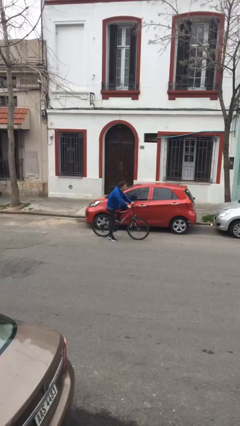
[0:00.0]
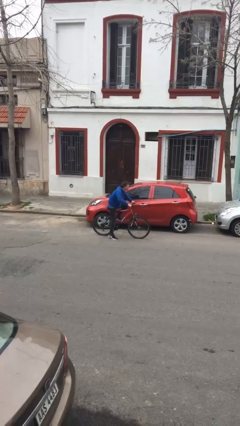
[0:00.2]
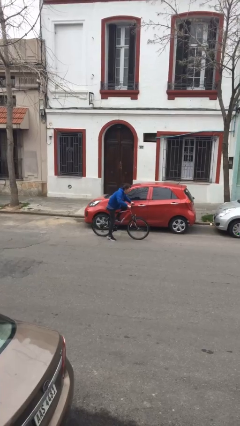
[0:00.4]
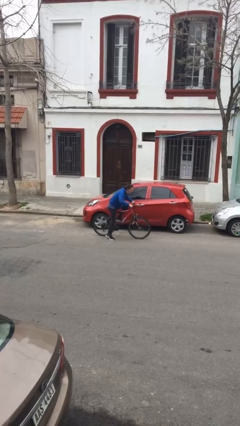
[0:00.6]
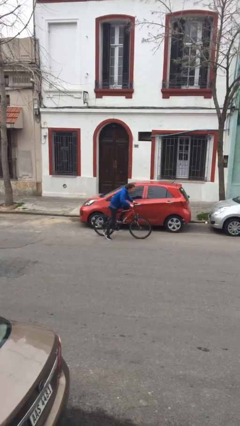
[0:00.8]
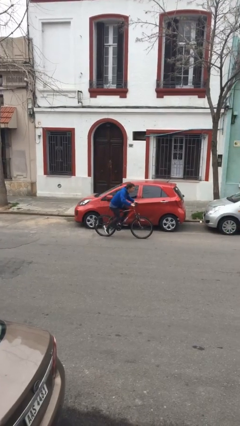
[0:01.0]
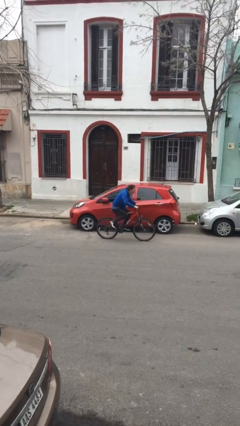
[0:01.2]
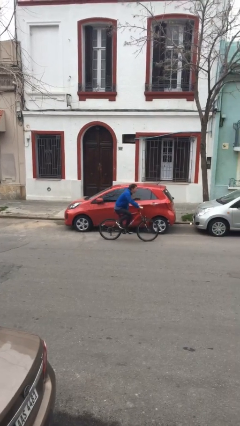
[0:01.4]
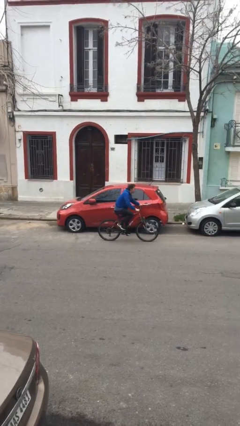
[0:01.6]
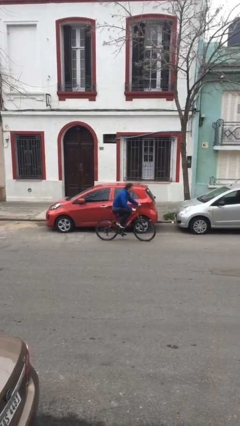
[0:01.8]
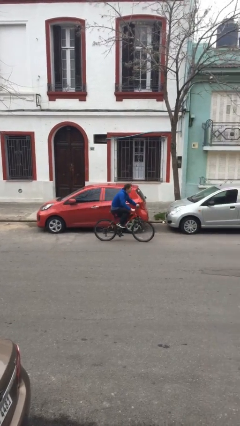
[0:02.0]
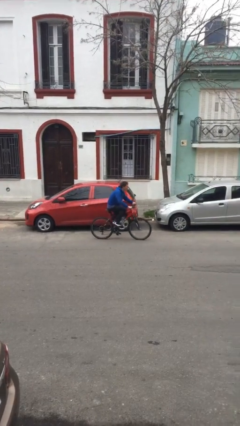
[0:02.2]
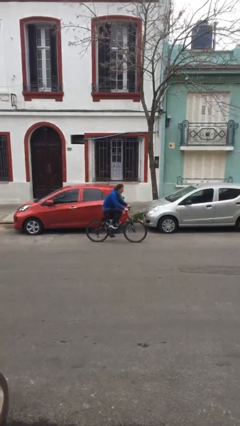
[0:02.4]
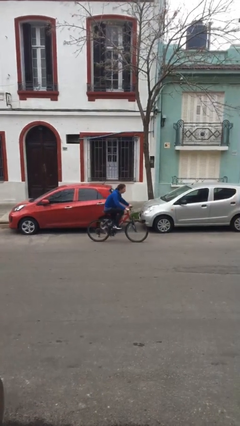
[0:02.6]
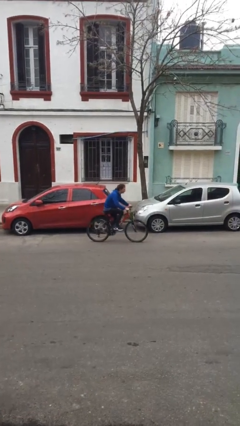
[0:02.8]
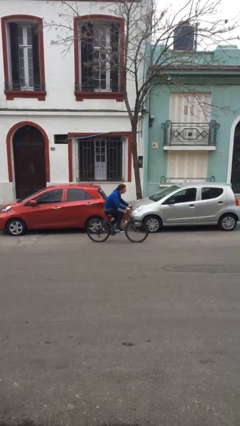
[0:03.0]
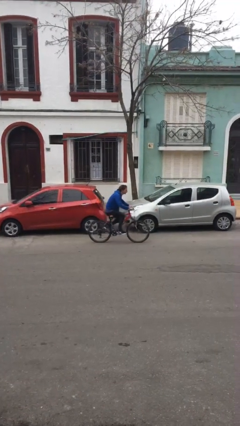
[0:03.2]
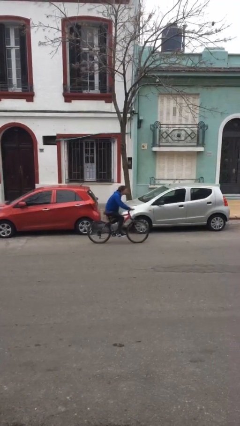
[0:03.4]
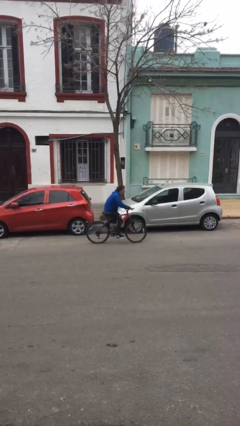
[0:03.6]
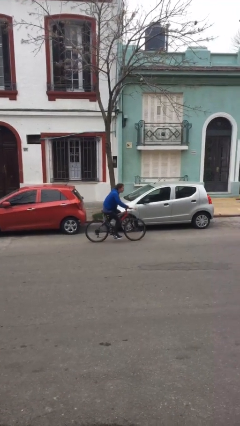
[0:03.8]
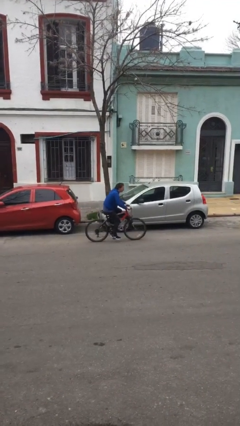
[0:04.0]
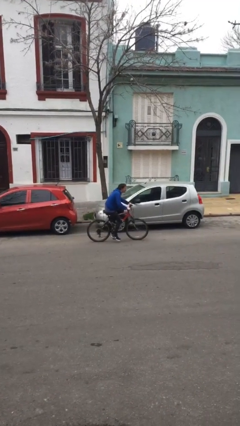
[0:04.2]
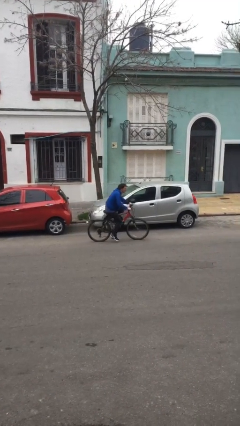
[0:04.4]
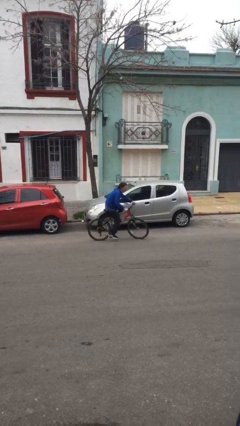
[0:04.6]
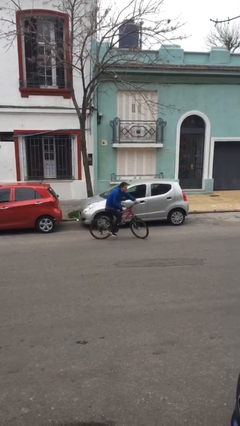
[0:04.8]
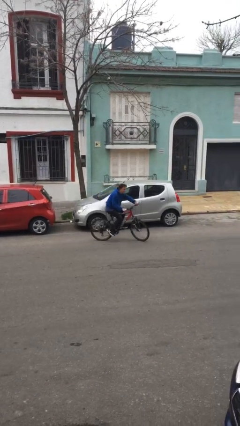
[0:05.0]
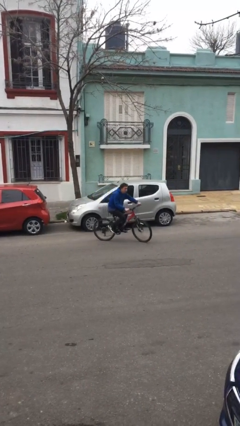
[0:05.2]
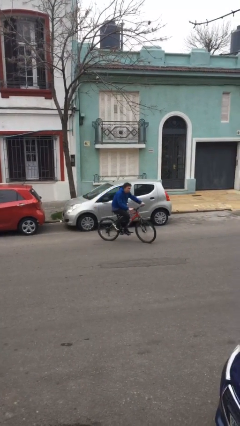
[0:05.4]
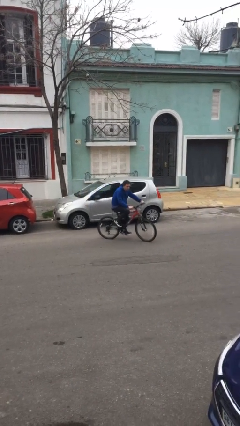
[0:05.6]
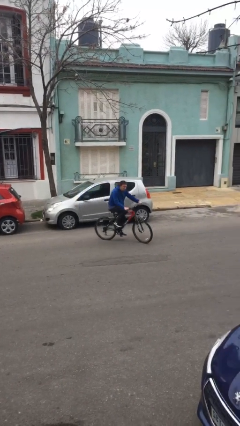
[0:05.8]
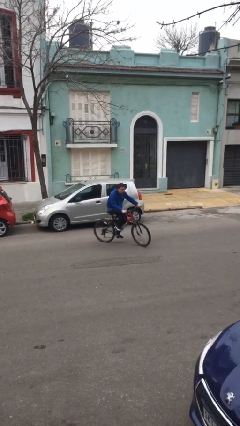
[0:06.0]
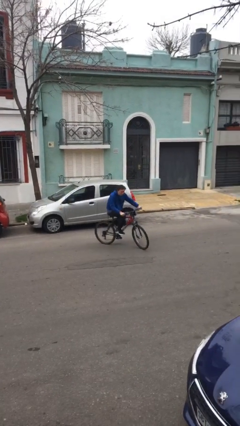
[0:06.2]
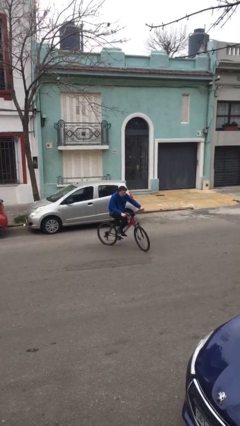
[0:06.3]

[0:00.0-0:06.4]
person rides bicycle

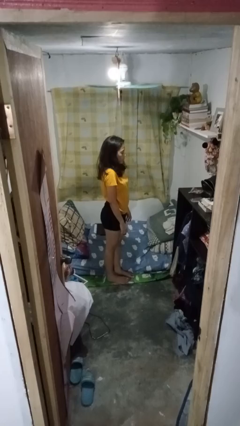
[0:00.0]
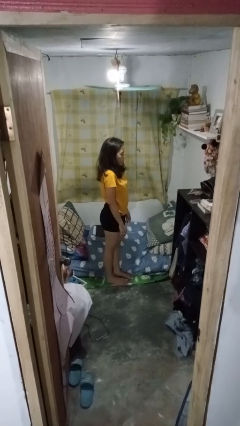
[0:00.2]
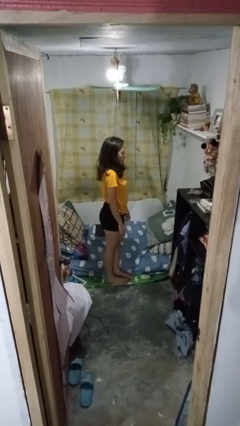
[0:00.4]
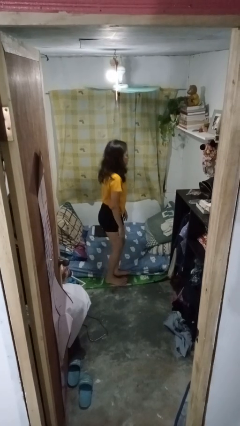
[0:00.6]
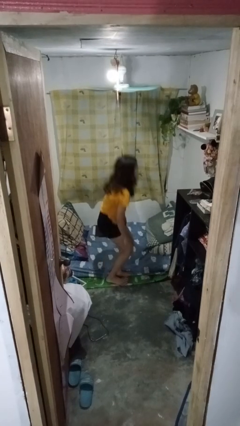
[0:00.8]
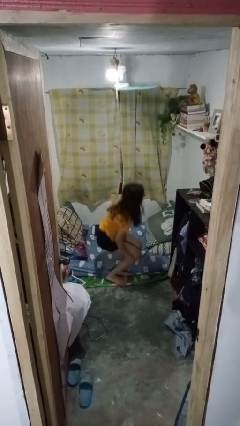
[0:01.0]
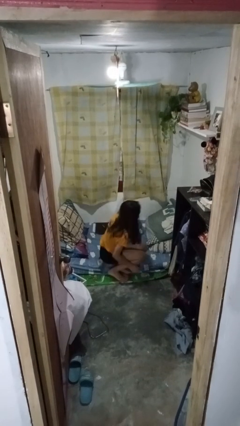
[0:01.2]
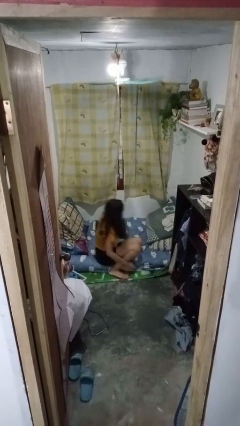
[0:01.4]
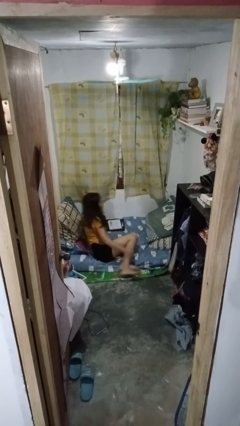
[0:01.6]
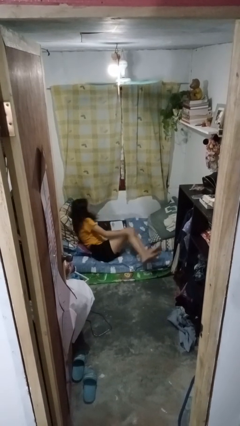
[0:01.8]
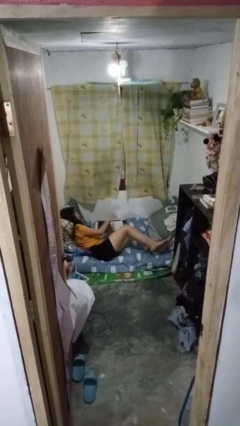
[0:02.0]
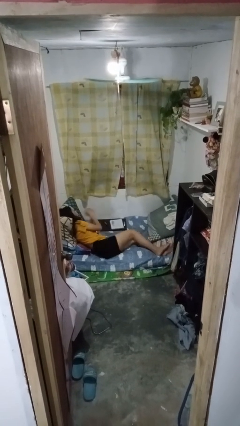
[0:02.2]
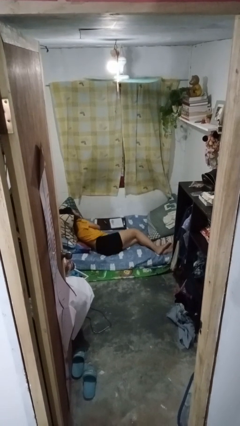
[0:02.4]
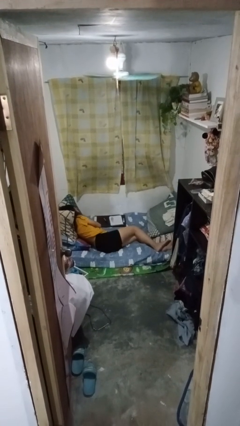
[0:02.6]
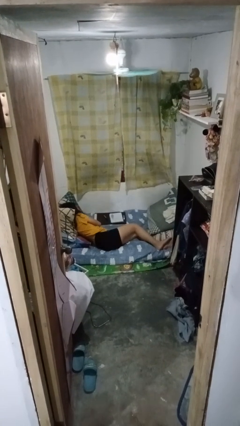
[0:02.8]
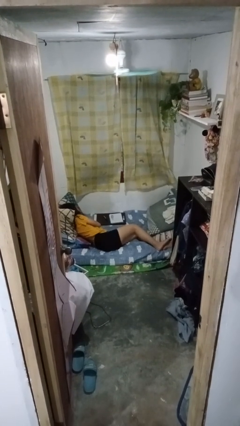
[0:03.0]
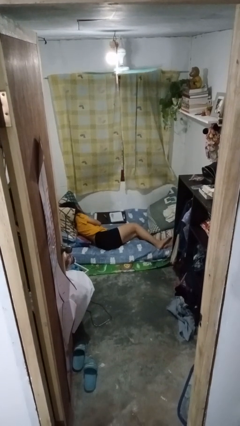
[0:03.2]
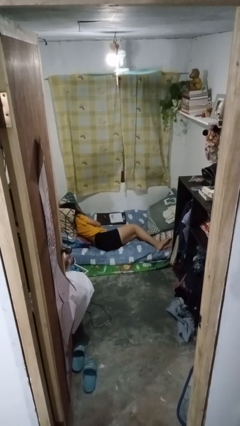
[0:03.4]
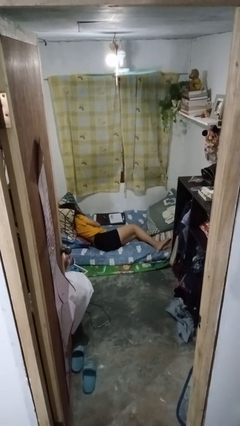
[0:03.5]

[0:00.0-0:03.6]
person lies down on bed

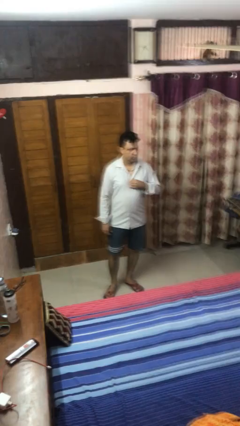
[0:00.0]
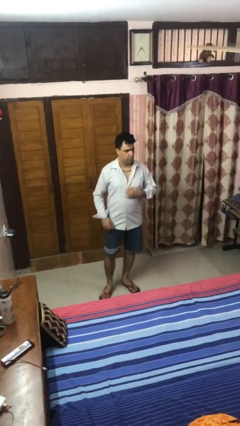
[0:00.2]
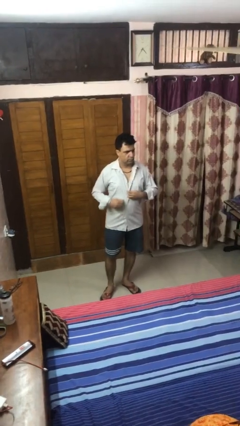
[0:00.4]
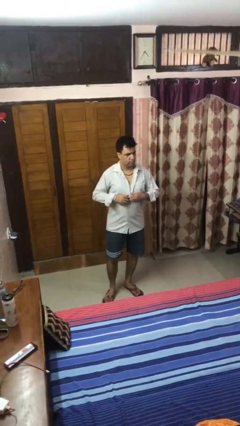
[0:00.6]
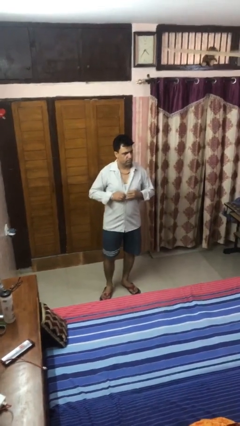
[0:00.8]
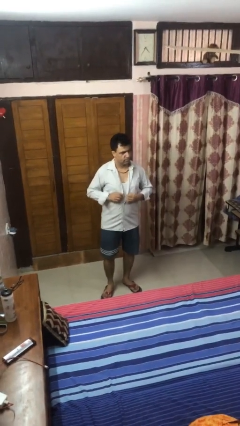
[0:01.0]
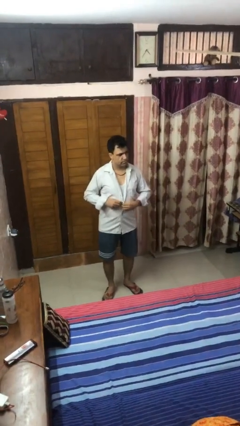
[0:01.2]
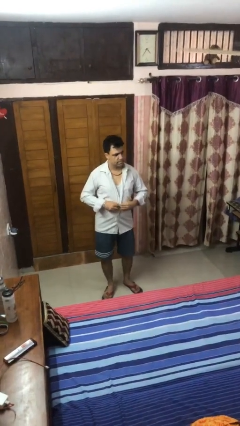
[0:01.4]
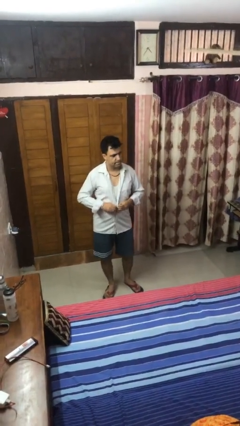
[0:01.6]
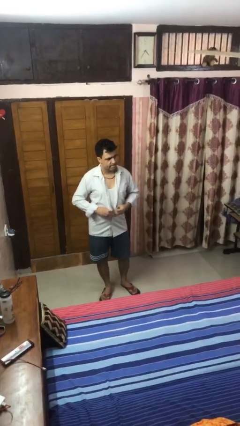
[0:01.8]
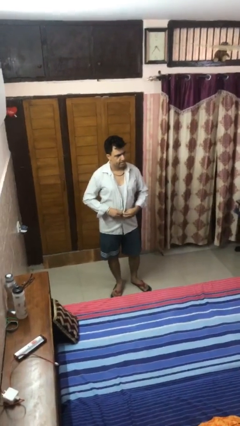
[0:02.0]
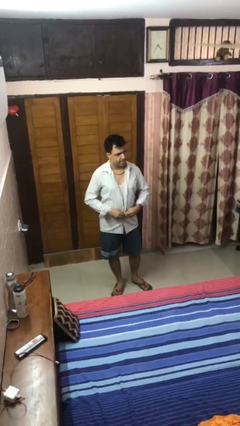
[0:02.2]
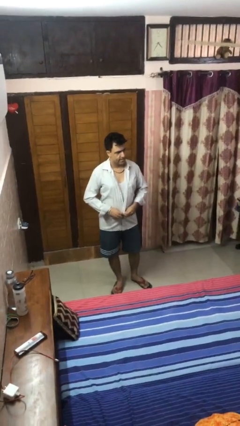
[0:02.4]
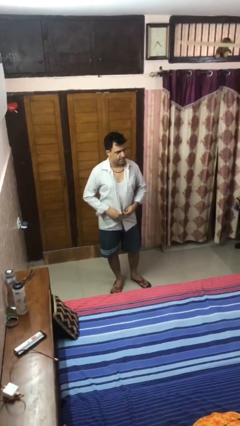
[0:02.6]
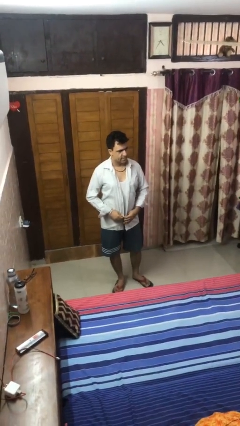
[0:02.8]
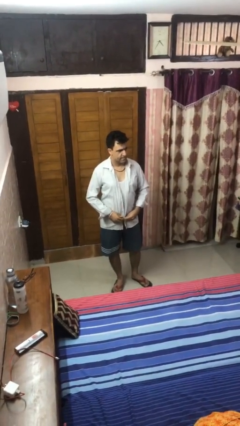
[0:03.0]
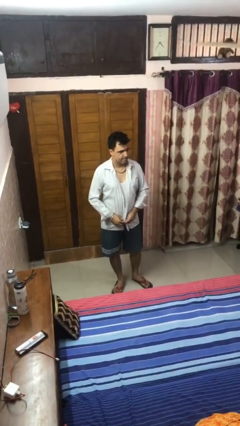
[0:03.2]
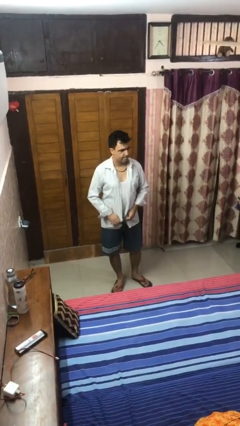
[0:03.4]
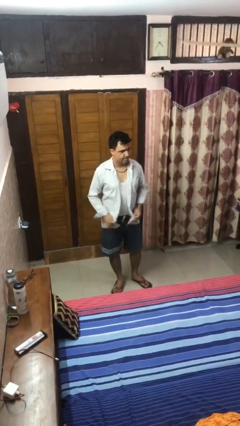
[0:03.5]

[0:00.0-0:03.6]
person unbuttons shirt

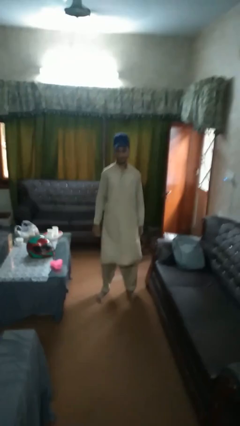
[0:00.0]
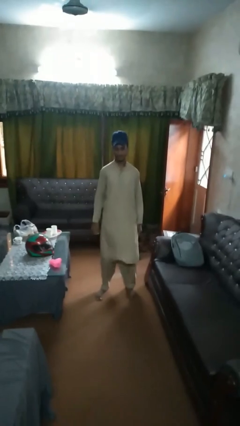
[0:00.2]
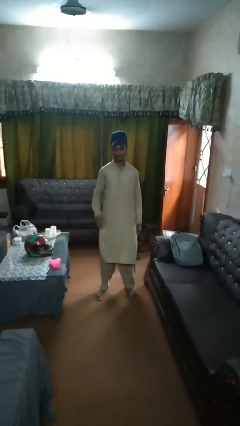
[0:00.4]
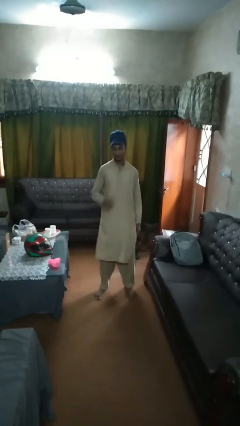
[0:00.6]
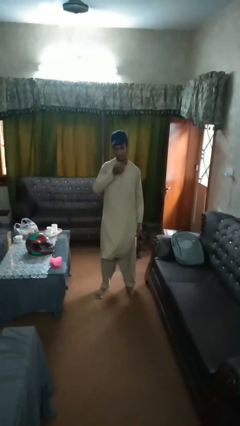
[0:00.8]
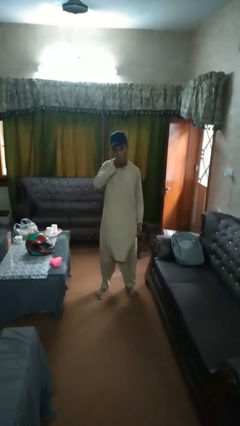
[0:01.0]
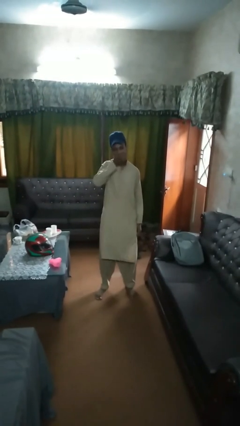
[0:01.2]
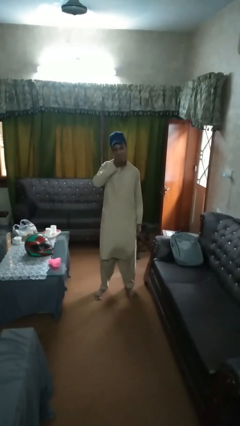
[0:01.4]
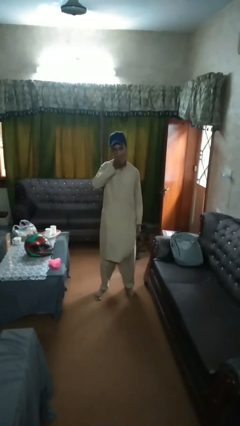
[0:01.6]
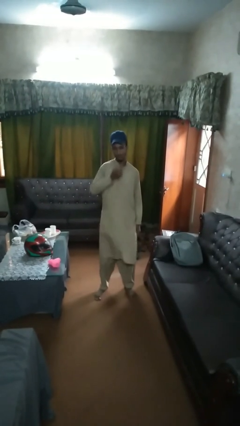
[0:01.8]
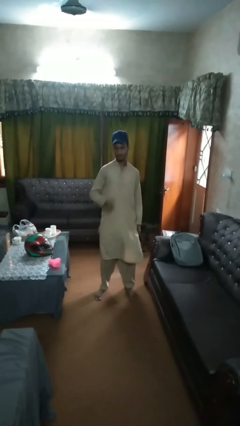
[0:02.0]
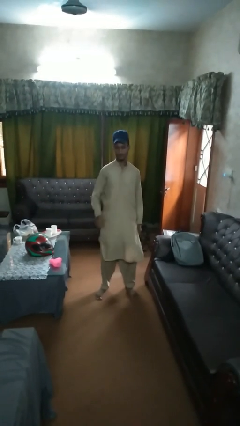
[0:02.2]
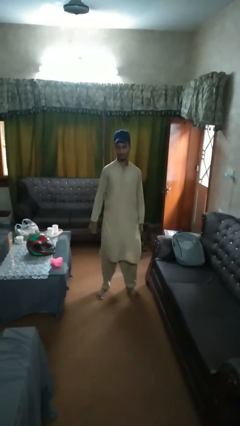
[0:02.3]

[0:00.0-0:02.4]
person eats apple

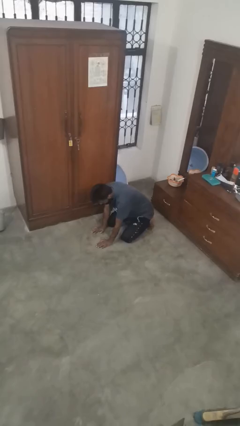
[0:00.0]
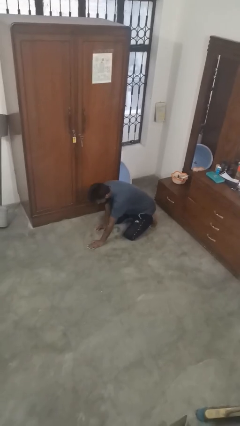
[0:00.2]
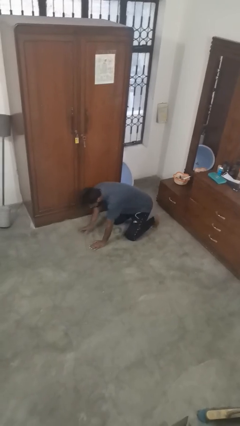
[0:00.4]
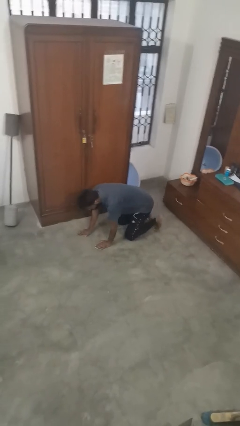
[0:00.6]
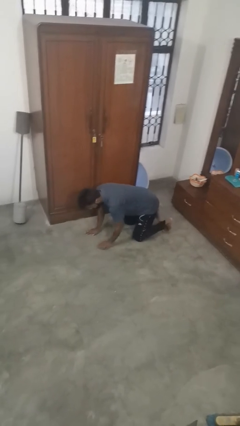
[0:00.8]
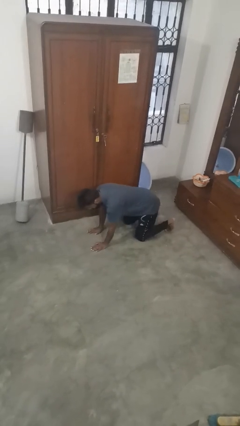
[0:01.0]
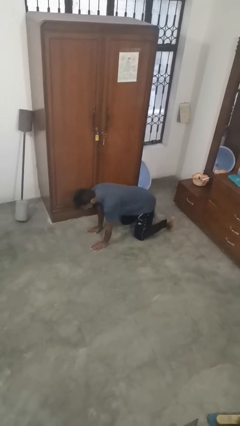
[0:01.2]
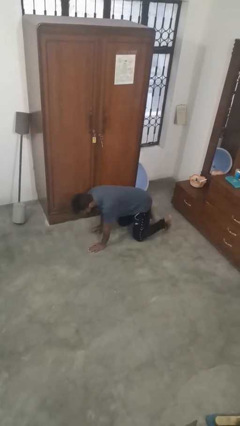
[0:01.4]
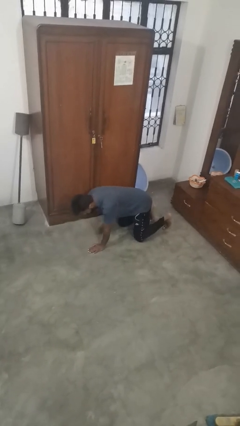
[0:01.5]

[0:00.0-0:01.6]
person crawls
